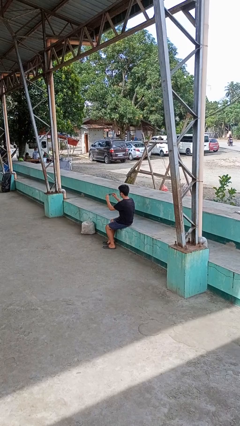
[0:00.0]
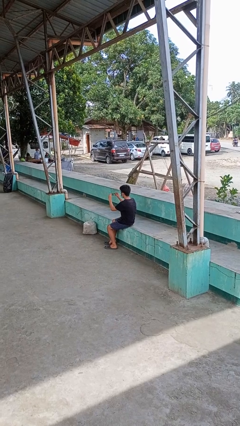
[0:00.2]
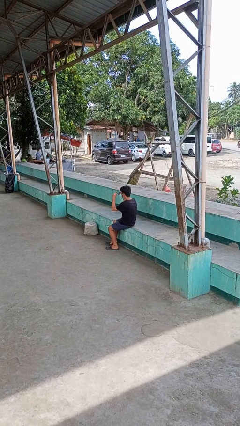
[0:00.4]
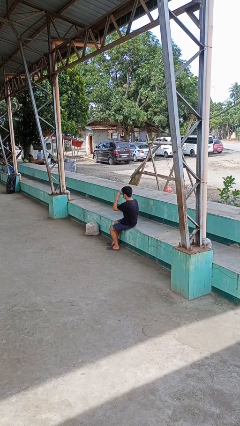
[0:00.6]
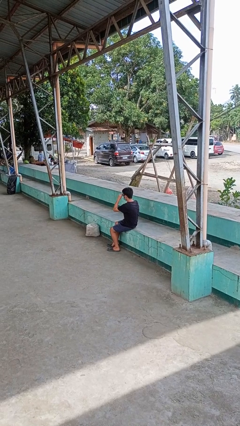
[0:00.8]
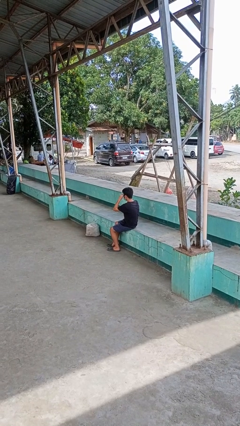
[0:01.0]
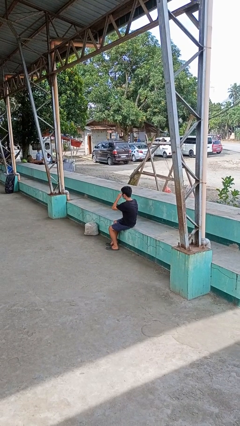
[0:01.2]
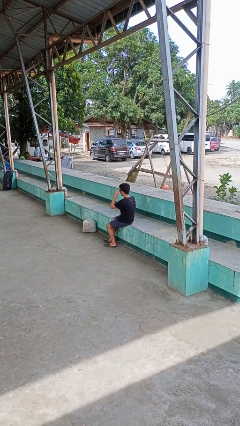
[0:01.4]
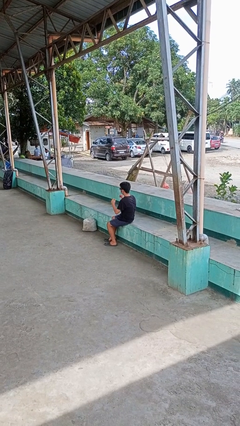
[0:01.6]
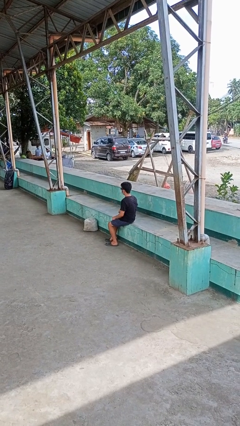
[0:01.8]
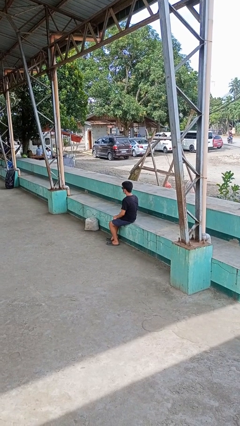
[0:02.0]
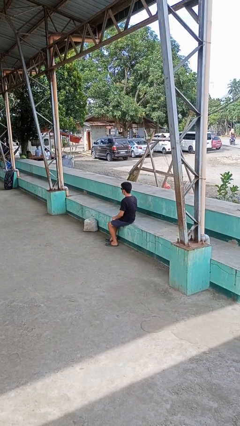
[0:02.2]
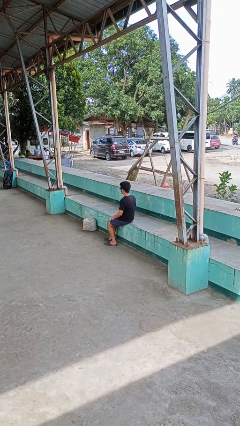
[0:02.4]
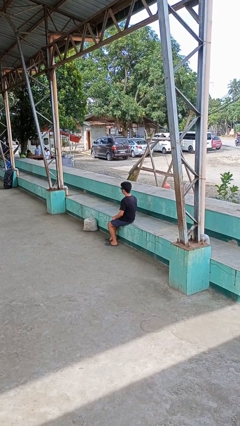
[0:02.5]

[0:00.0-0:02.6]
person puts on sunglasses

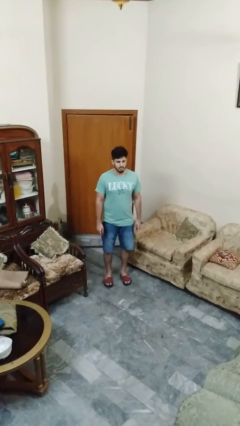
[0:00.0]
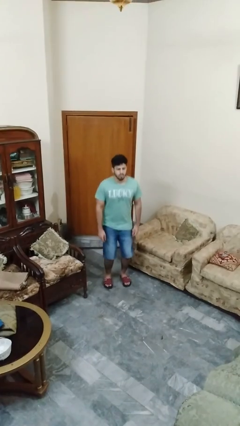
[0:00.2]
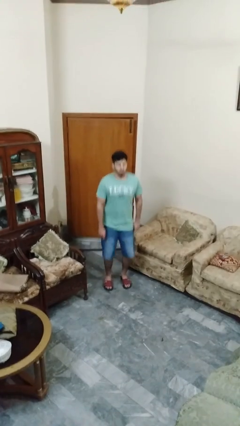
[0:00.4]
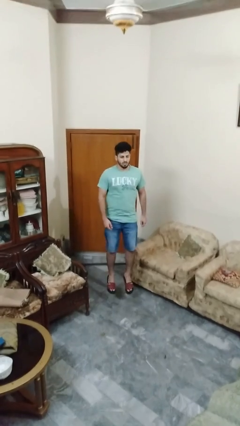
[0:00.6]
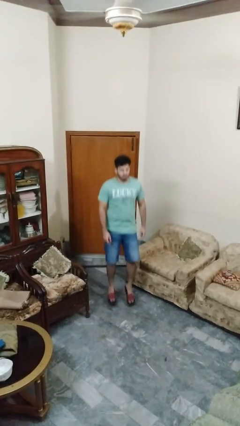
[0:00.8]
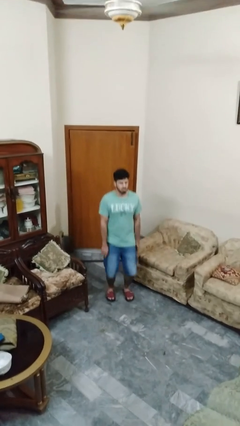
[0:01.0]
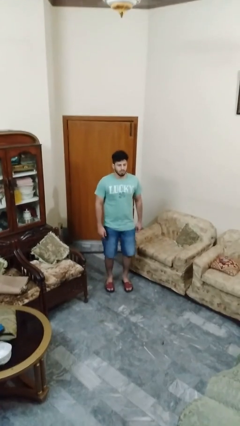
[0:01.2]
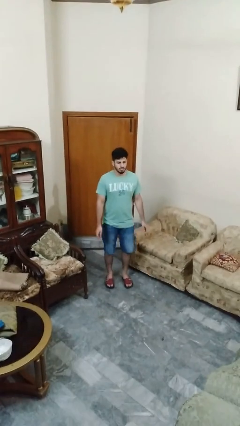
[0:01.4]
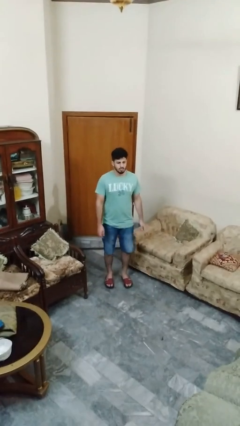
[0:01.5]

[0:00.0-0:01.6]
person jumps

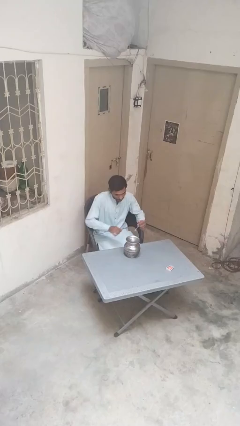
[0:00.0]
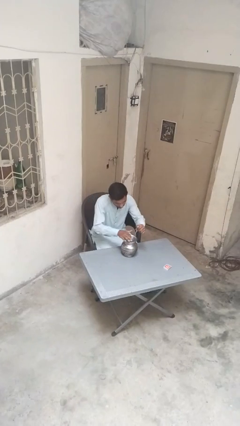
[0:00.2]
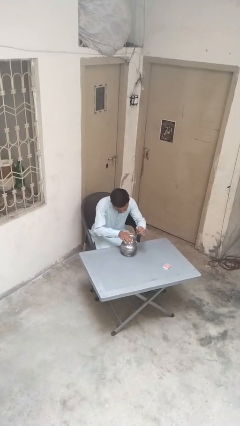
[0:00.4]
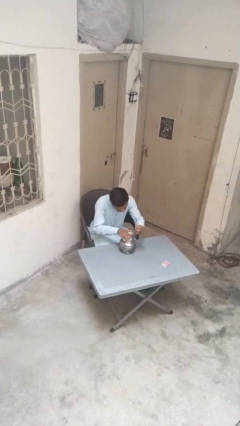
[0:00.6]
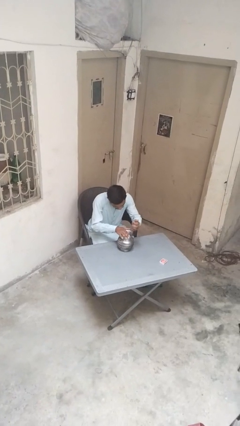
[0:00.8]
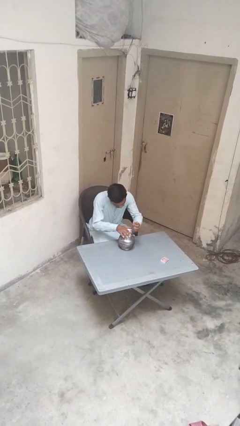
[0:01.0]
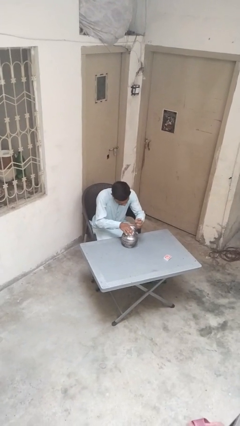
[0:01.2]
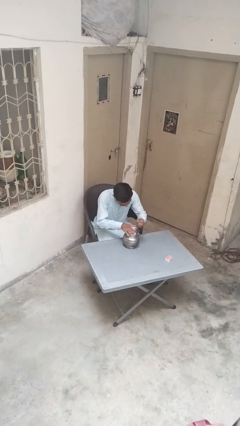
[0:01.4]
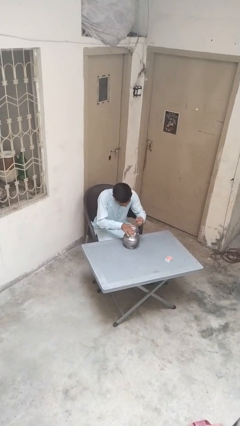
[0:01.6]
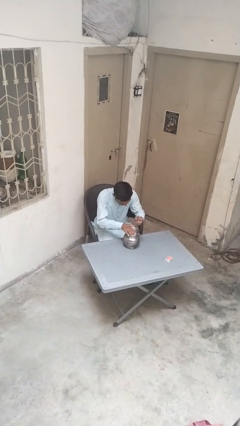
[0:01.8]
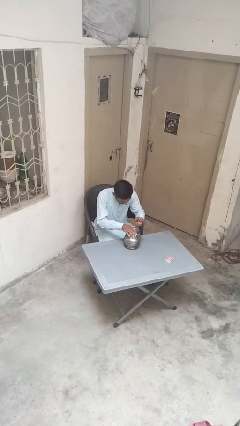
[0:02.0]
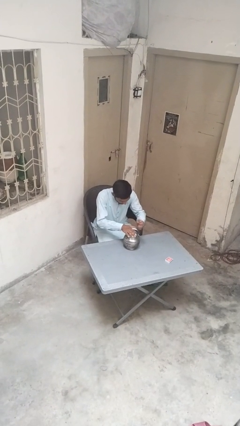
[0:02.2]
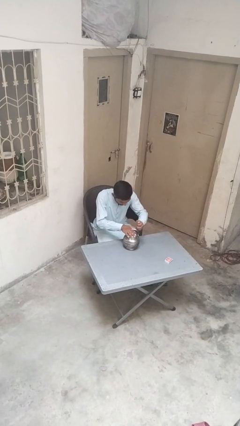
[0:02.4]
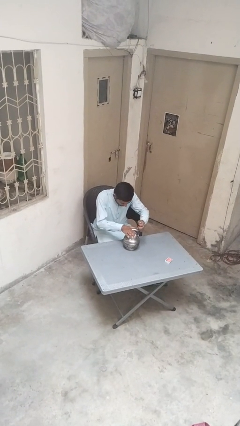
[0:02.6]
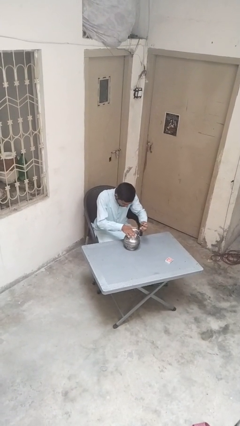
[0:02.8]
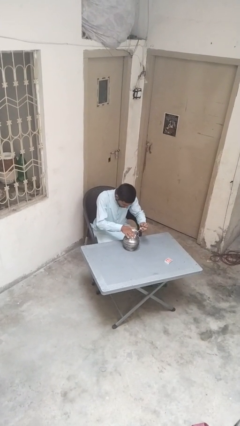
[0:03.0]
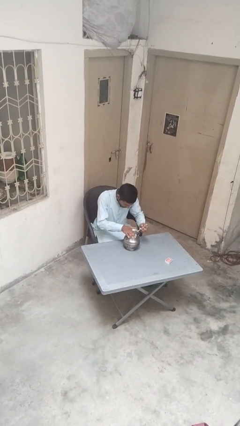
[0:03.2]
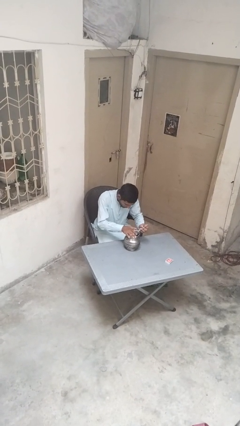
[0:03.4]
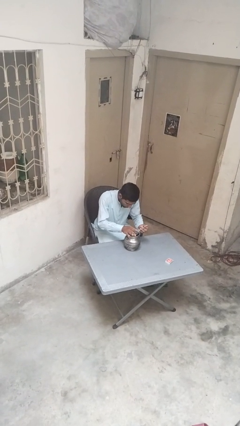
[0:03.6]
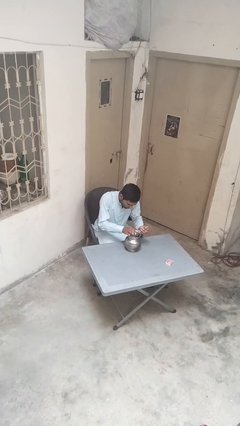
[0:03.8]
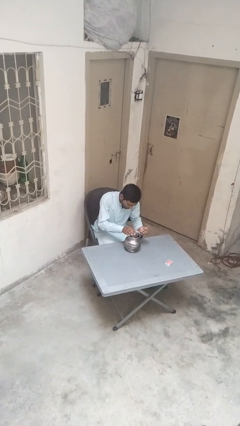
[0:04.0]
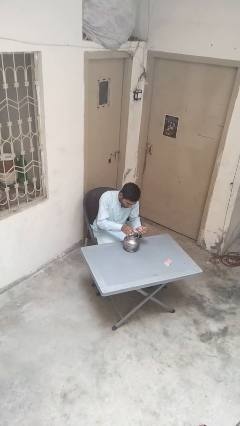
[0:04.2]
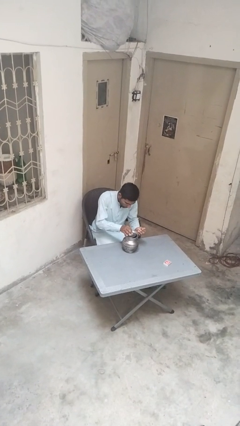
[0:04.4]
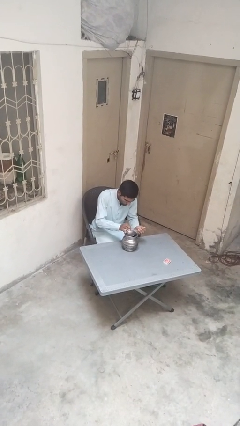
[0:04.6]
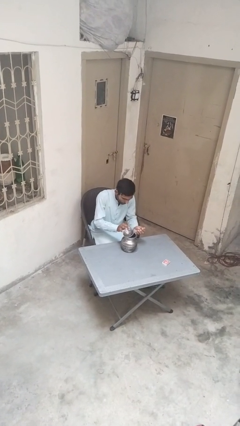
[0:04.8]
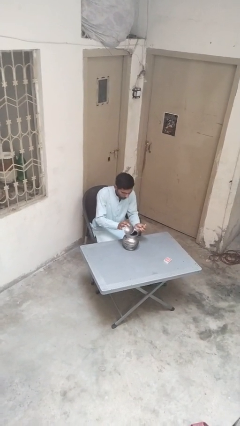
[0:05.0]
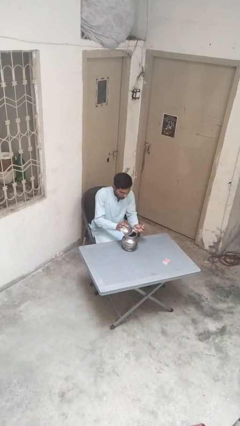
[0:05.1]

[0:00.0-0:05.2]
person opens can with can opener

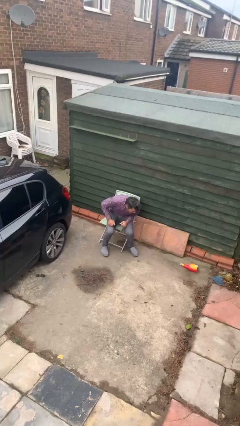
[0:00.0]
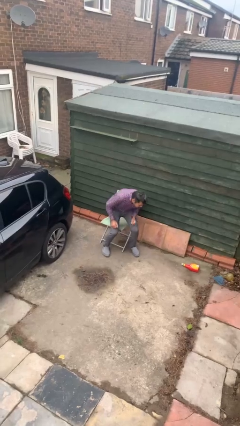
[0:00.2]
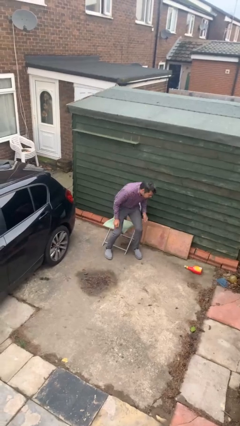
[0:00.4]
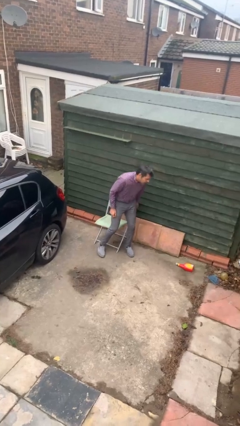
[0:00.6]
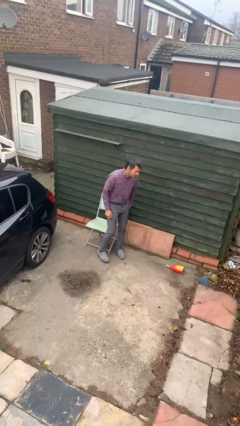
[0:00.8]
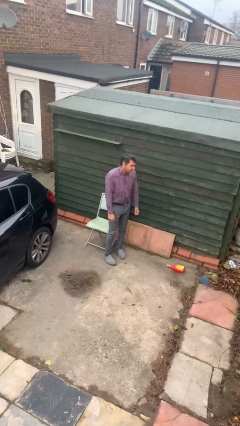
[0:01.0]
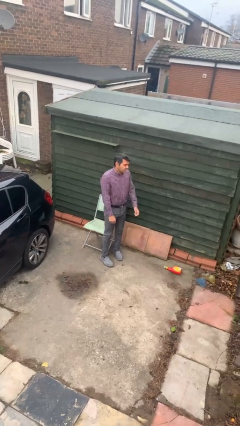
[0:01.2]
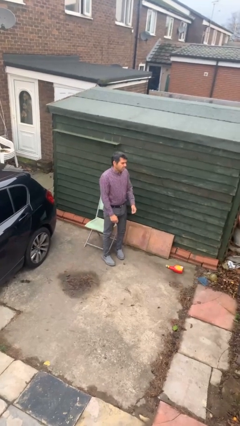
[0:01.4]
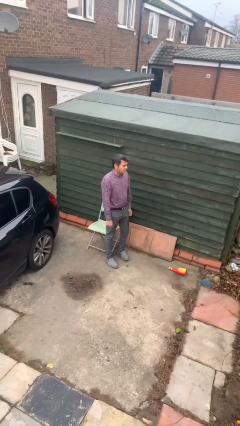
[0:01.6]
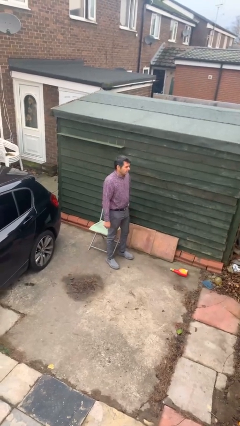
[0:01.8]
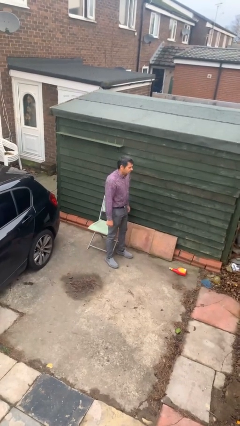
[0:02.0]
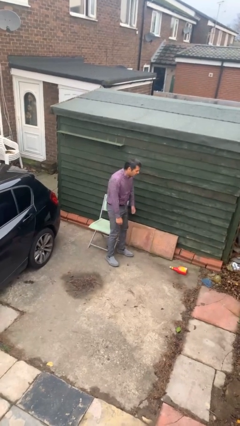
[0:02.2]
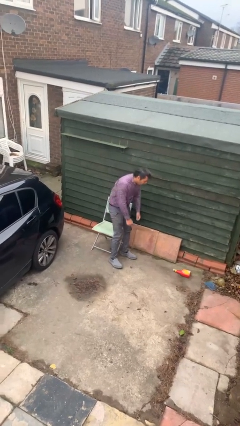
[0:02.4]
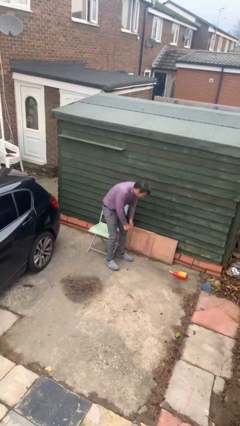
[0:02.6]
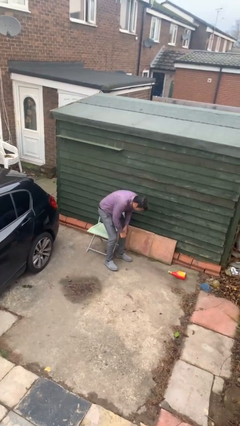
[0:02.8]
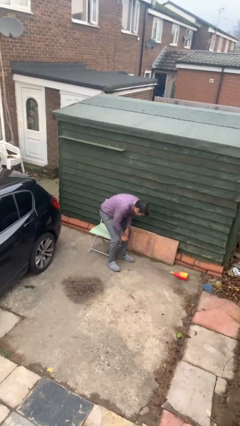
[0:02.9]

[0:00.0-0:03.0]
person stands up

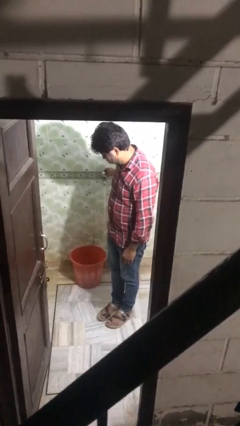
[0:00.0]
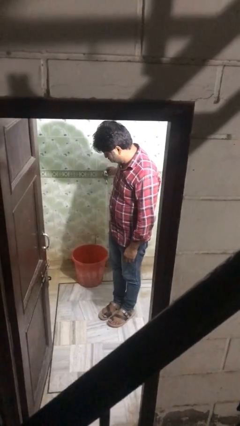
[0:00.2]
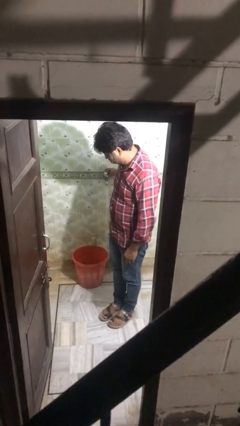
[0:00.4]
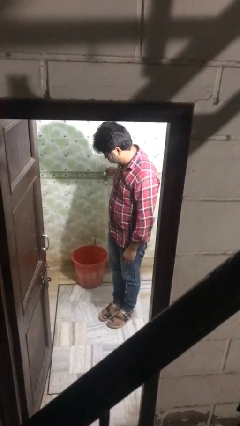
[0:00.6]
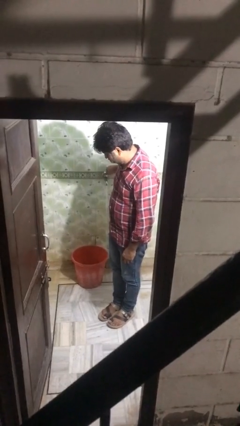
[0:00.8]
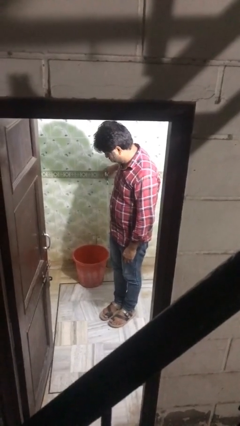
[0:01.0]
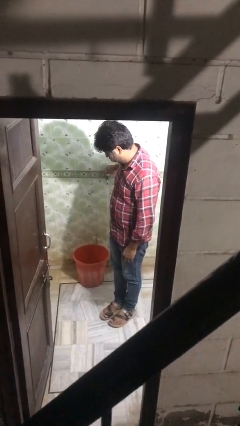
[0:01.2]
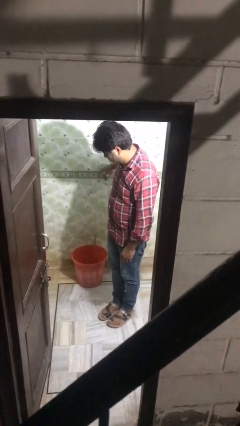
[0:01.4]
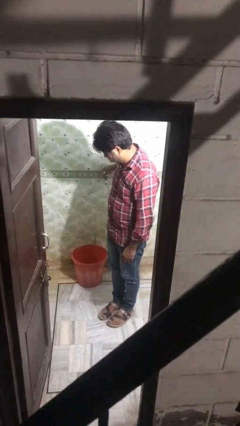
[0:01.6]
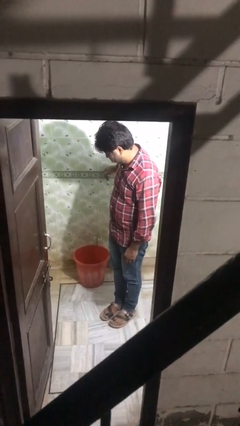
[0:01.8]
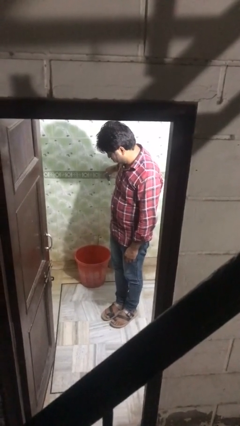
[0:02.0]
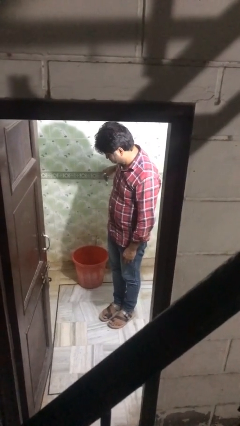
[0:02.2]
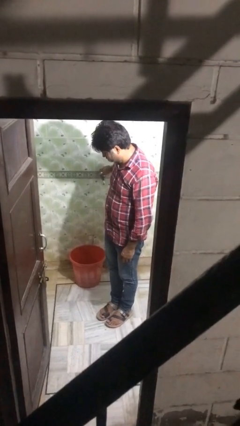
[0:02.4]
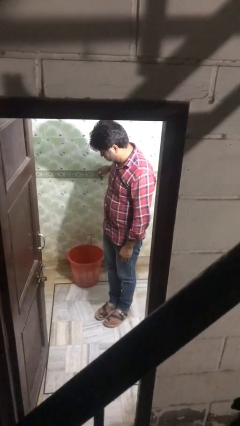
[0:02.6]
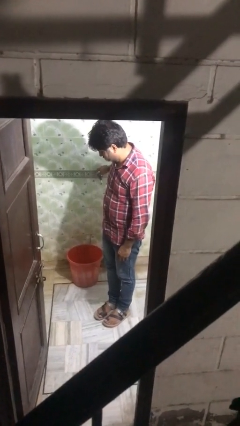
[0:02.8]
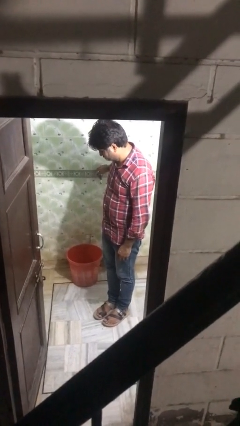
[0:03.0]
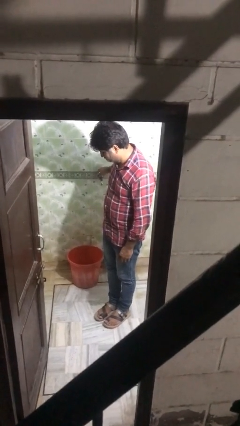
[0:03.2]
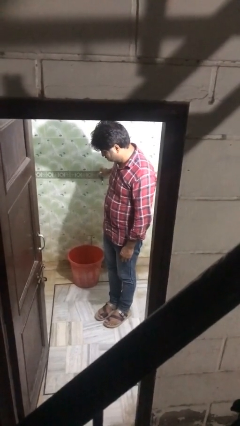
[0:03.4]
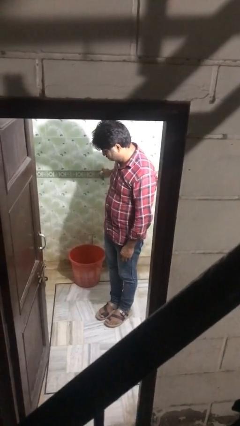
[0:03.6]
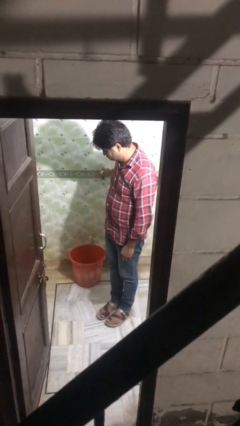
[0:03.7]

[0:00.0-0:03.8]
person turns off faucet

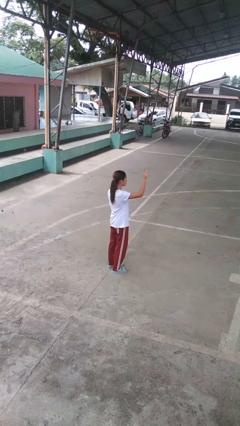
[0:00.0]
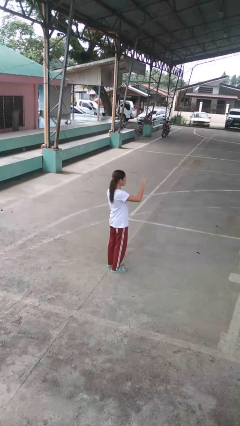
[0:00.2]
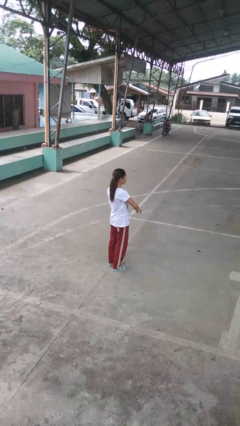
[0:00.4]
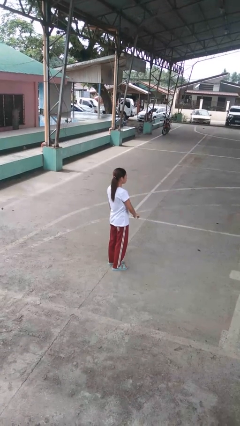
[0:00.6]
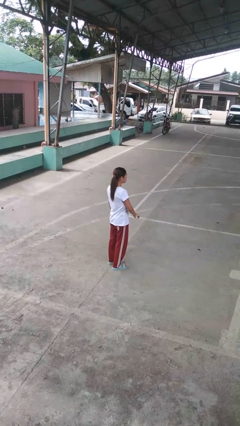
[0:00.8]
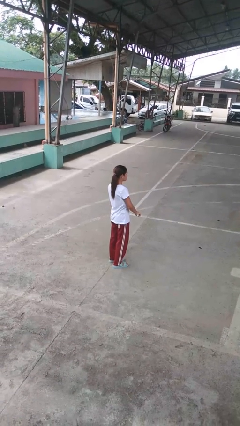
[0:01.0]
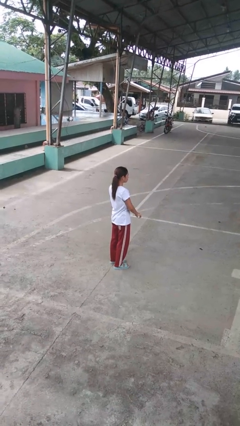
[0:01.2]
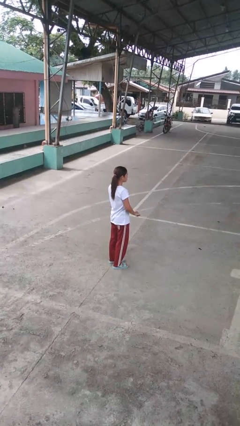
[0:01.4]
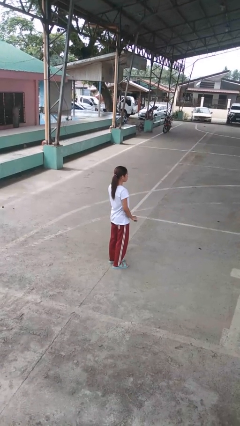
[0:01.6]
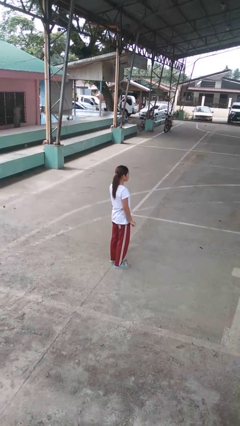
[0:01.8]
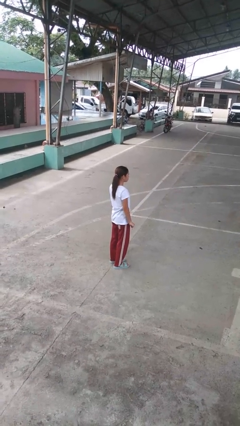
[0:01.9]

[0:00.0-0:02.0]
person gestures swipe down
